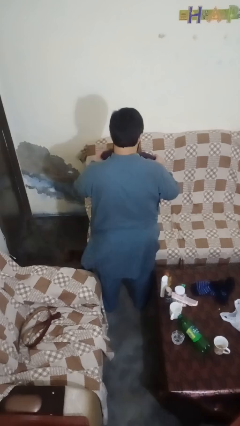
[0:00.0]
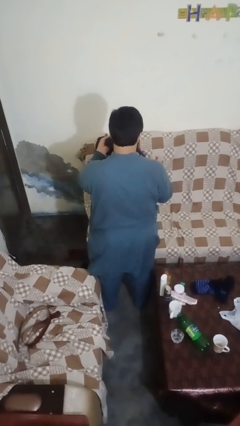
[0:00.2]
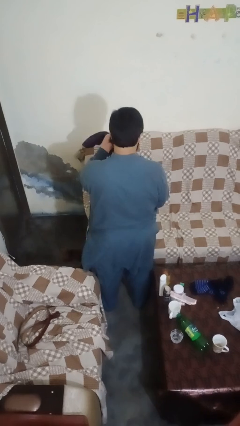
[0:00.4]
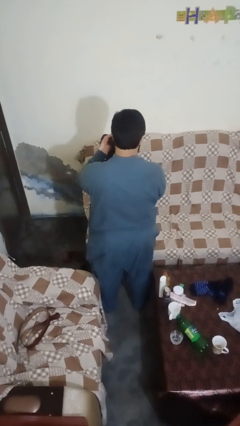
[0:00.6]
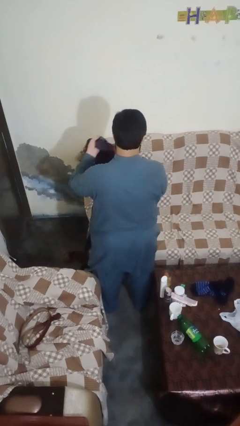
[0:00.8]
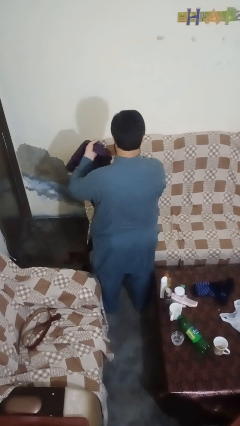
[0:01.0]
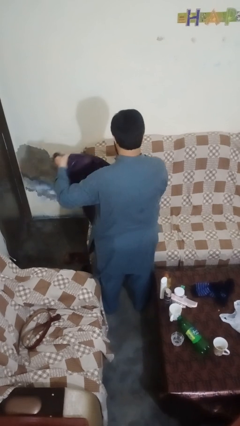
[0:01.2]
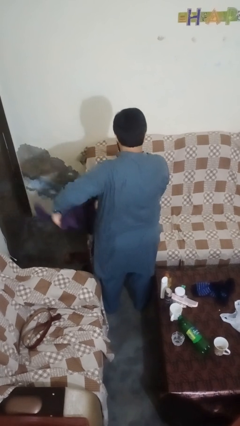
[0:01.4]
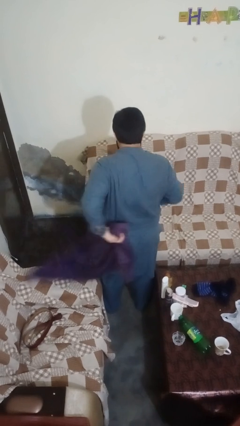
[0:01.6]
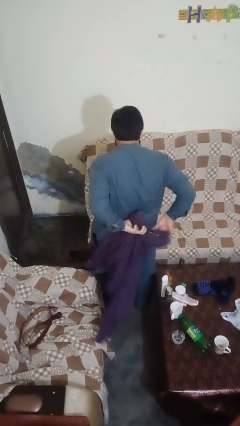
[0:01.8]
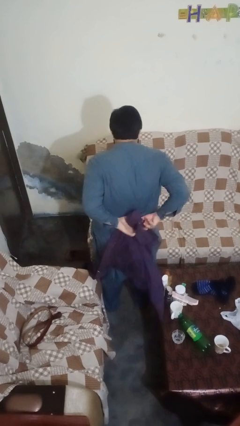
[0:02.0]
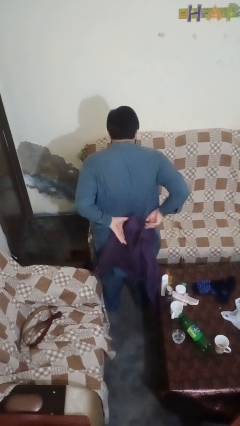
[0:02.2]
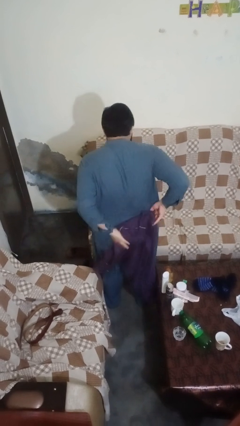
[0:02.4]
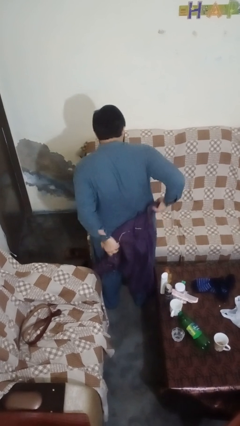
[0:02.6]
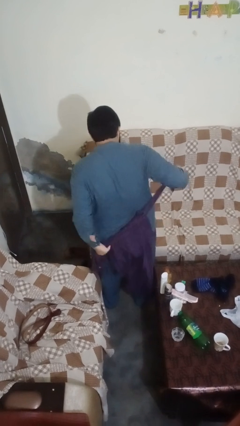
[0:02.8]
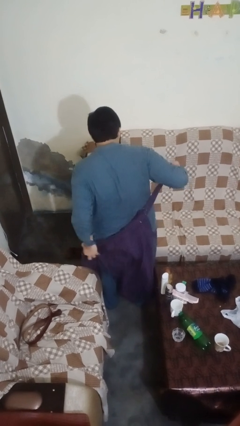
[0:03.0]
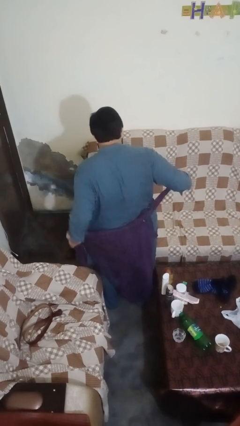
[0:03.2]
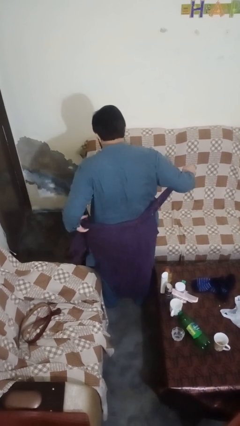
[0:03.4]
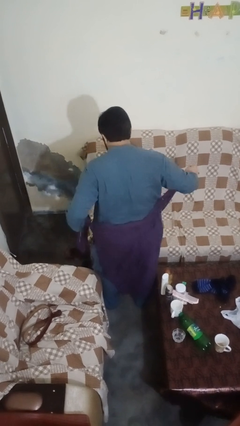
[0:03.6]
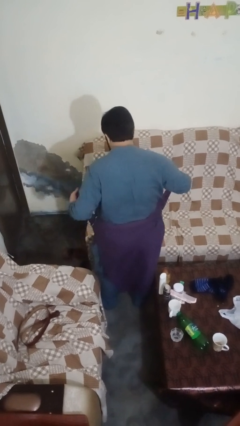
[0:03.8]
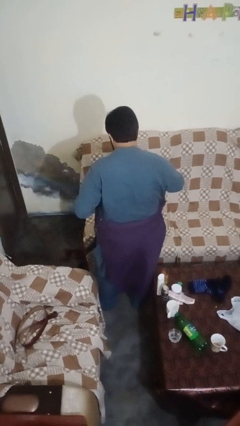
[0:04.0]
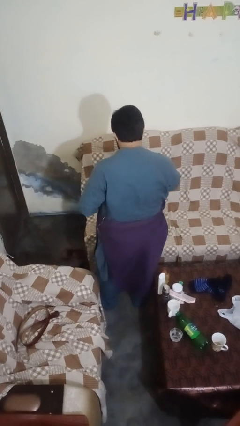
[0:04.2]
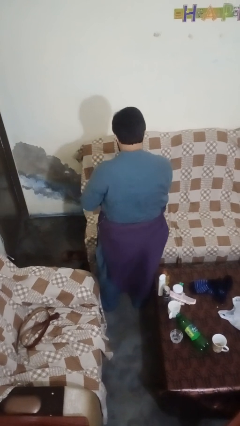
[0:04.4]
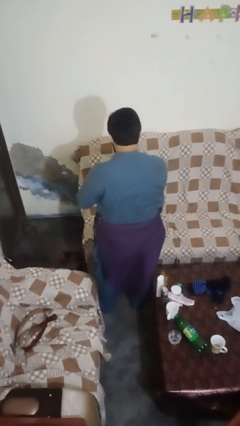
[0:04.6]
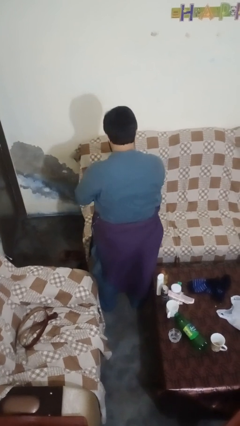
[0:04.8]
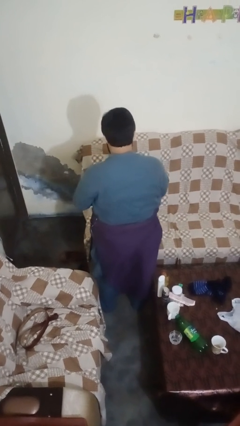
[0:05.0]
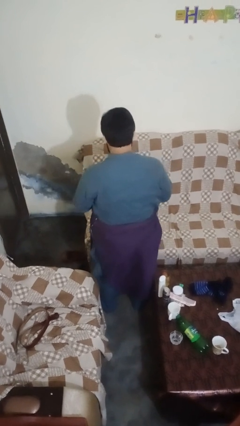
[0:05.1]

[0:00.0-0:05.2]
person ties jacket around waist

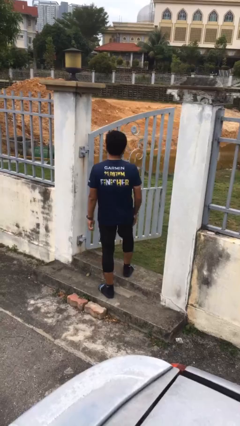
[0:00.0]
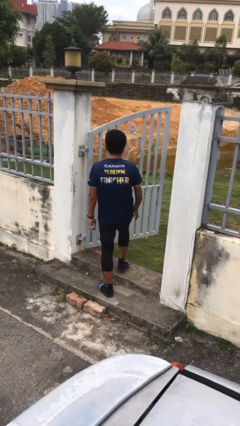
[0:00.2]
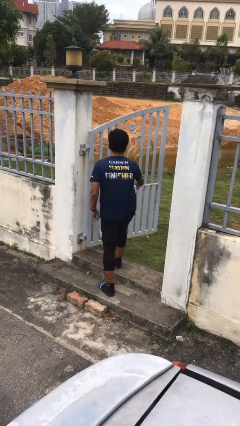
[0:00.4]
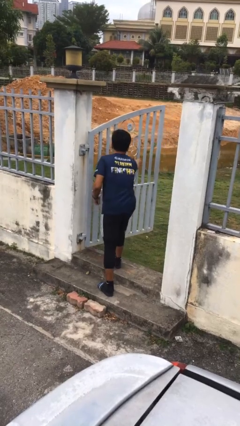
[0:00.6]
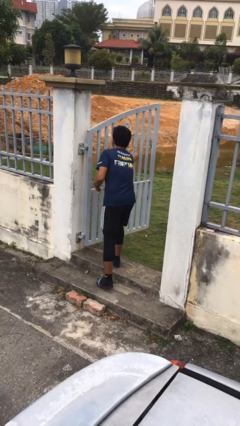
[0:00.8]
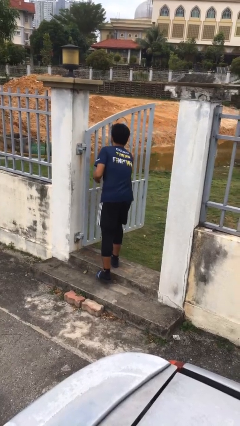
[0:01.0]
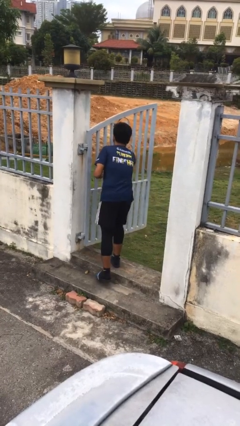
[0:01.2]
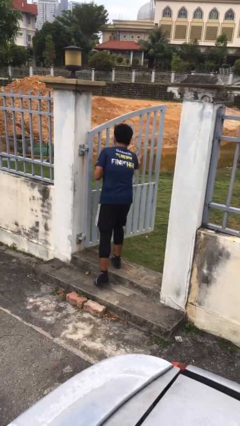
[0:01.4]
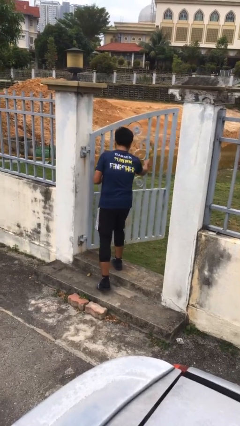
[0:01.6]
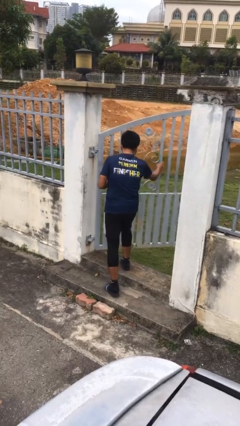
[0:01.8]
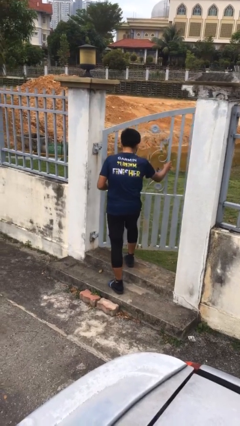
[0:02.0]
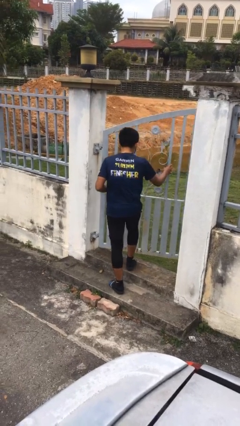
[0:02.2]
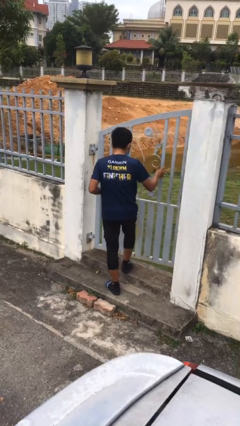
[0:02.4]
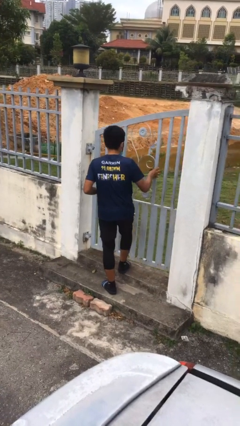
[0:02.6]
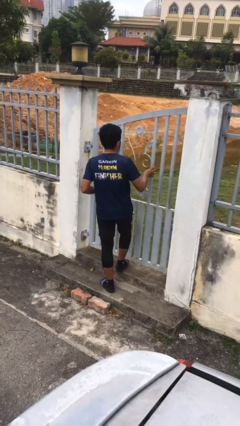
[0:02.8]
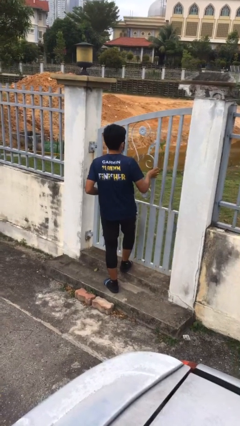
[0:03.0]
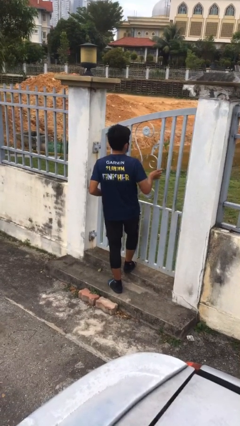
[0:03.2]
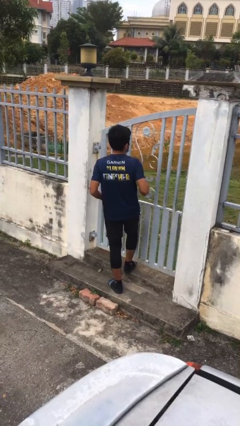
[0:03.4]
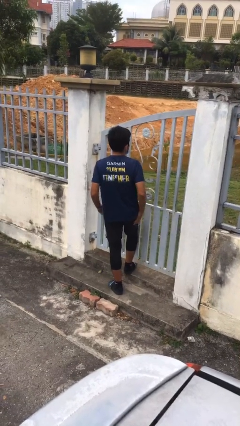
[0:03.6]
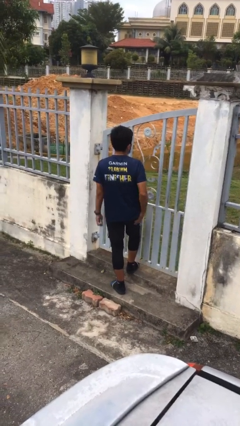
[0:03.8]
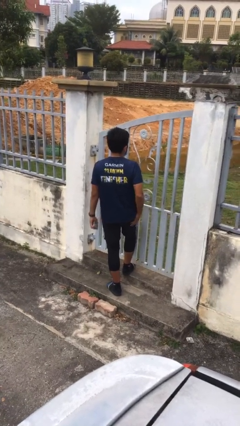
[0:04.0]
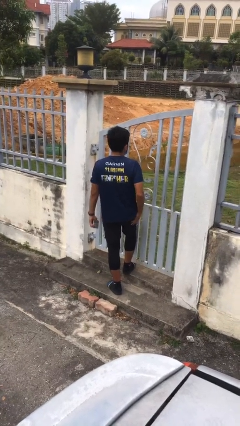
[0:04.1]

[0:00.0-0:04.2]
person closes facility door

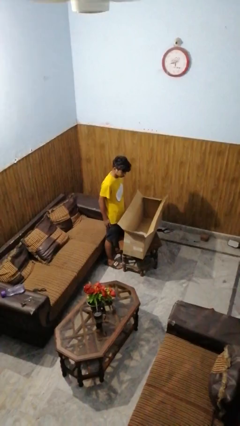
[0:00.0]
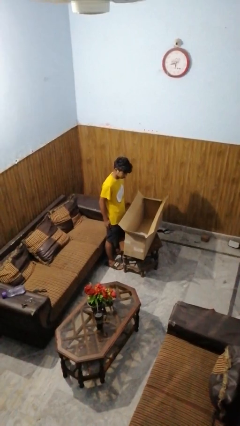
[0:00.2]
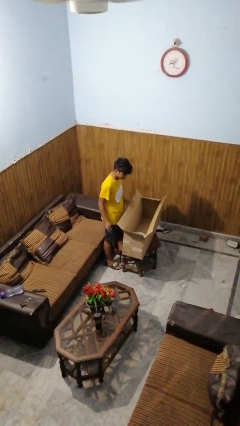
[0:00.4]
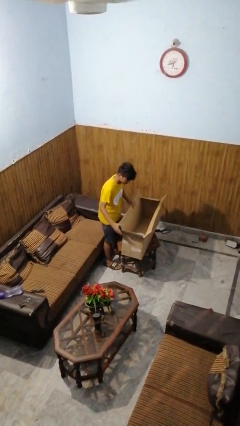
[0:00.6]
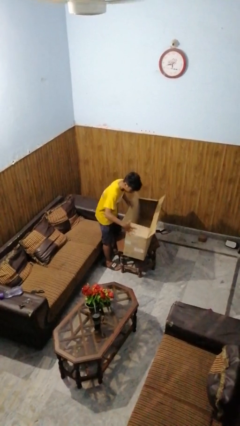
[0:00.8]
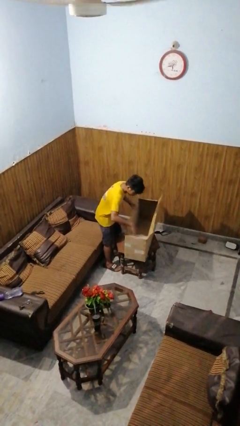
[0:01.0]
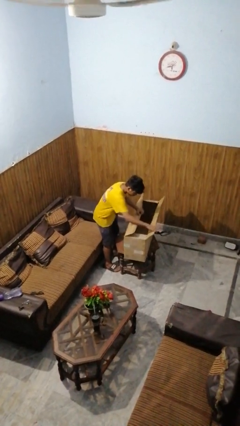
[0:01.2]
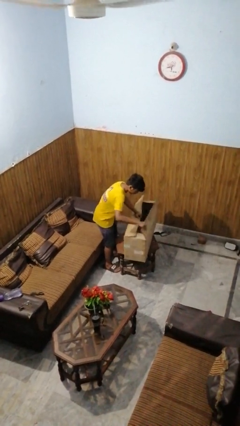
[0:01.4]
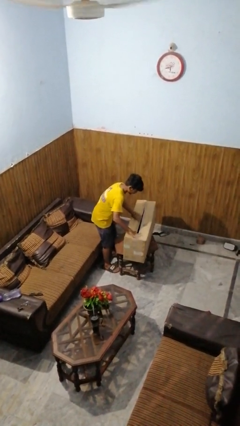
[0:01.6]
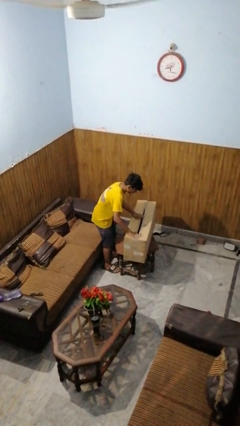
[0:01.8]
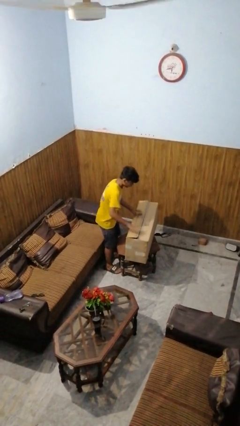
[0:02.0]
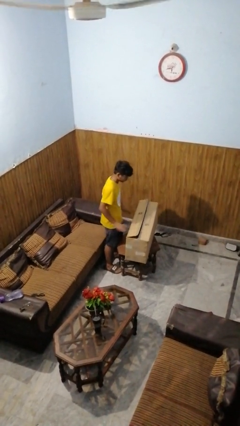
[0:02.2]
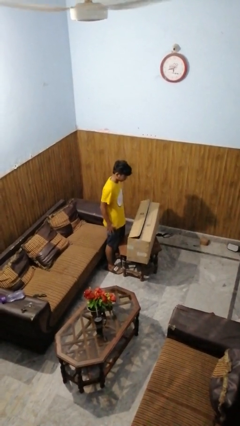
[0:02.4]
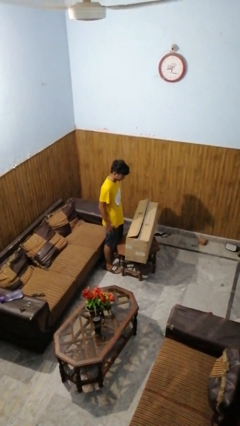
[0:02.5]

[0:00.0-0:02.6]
person closes box

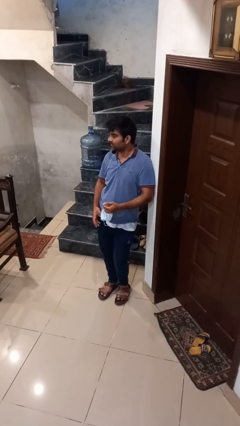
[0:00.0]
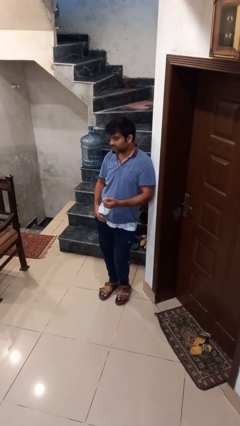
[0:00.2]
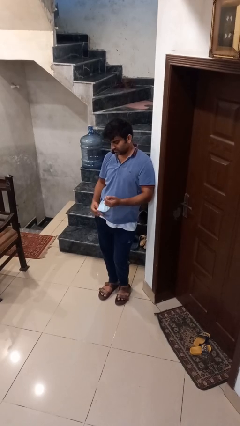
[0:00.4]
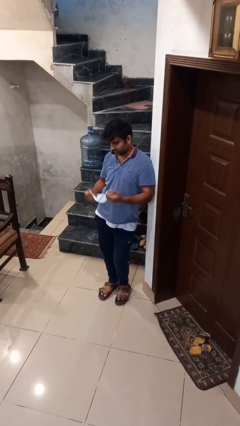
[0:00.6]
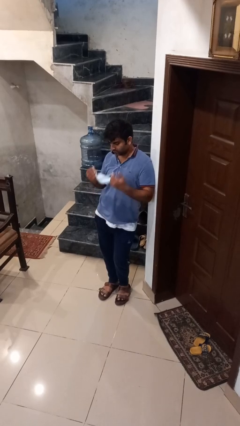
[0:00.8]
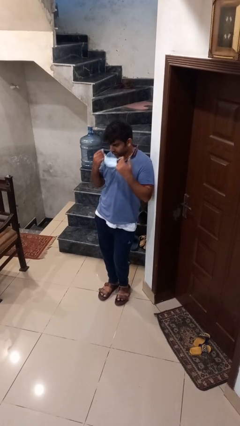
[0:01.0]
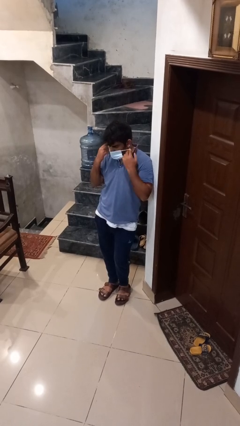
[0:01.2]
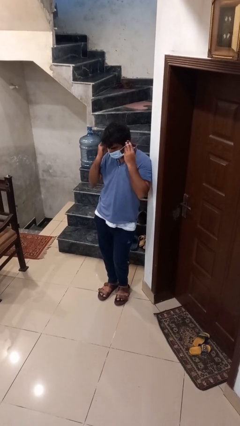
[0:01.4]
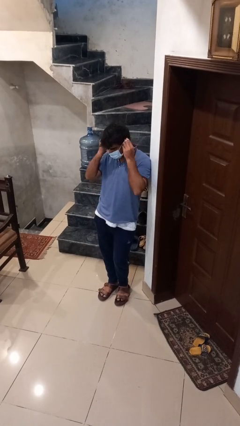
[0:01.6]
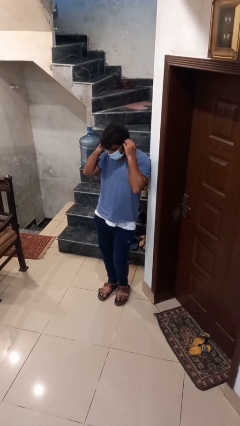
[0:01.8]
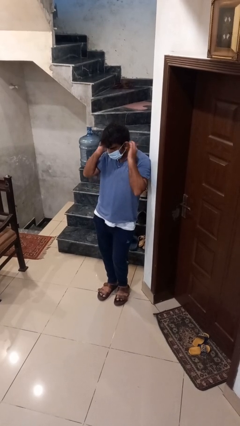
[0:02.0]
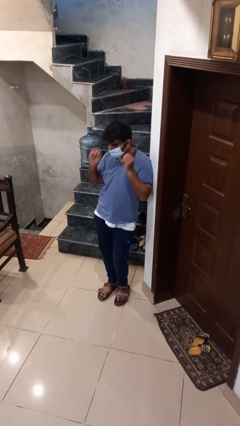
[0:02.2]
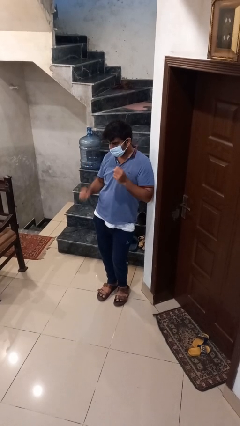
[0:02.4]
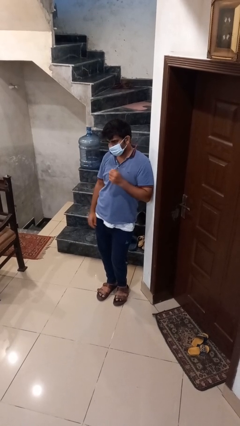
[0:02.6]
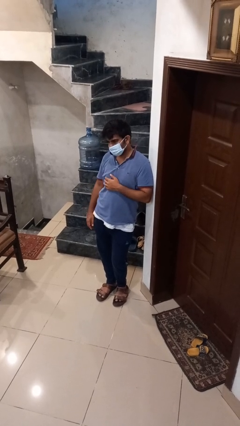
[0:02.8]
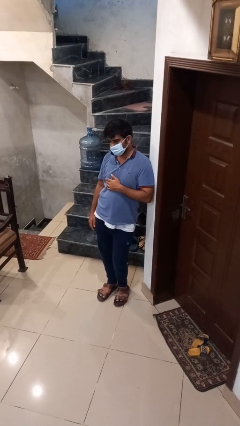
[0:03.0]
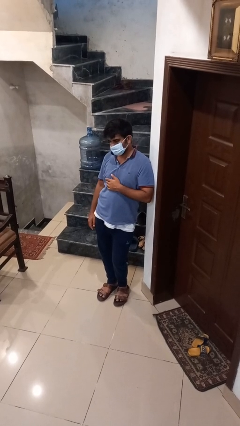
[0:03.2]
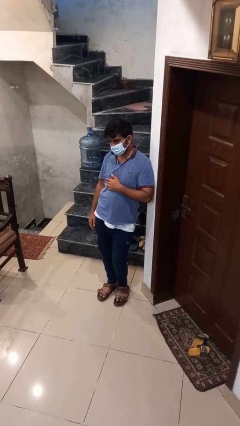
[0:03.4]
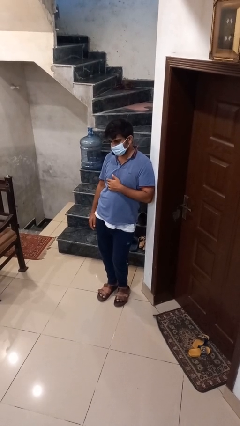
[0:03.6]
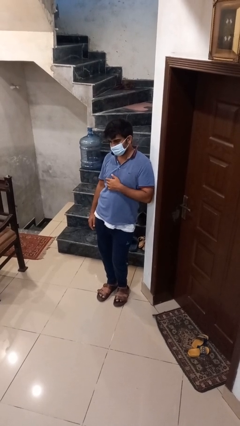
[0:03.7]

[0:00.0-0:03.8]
person puts on facemask

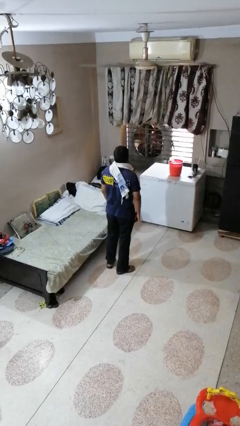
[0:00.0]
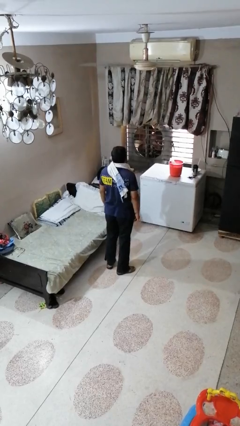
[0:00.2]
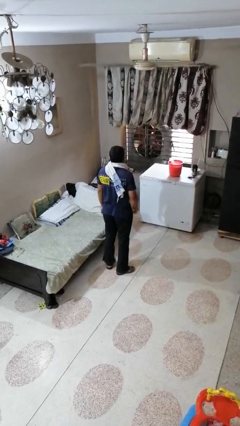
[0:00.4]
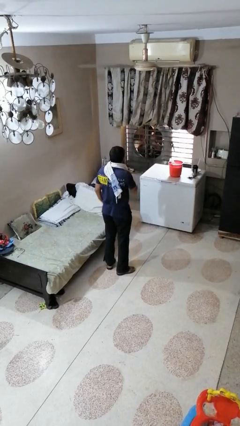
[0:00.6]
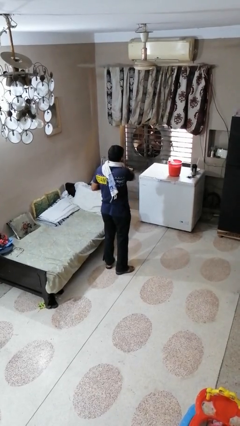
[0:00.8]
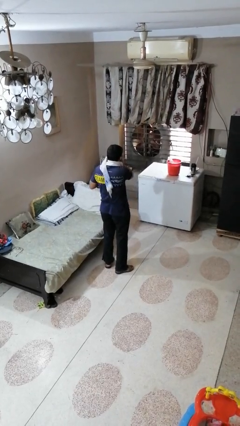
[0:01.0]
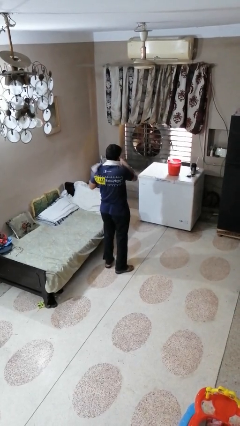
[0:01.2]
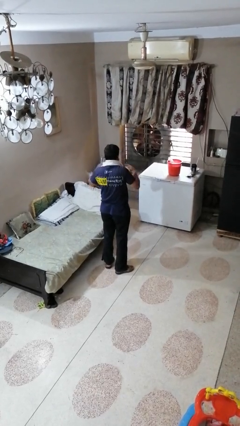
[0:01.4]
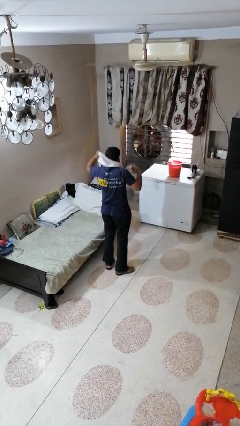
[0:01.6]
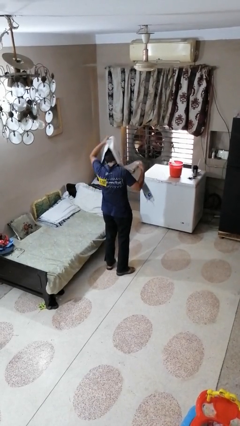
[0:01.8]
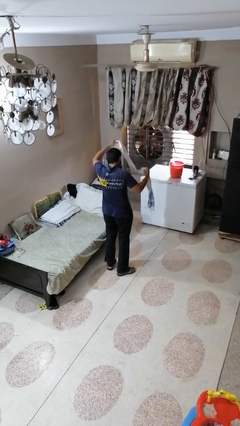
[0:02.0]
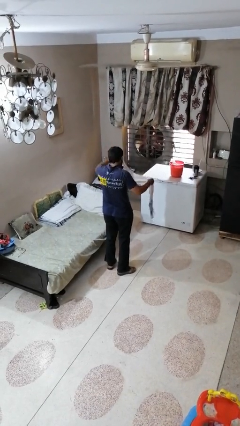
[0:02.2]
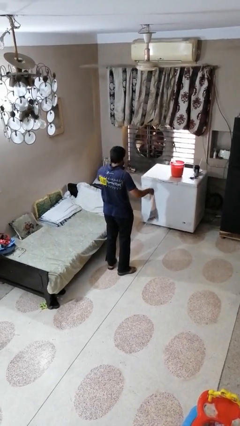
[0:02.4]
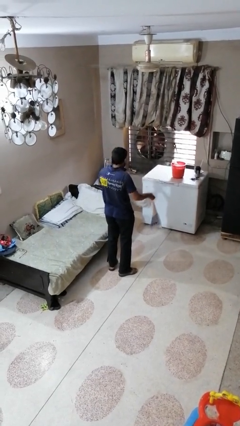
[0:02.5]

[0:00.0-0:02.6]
person takes off scarf
